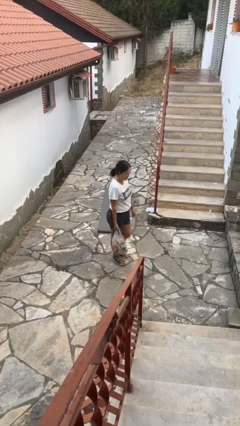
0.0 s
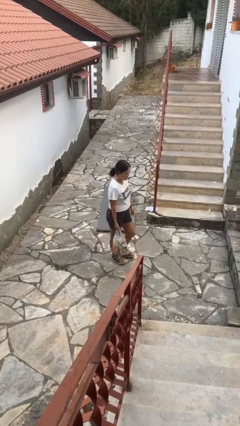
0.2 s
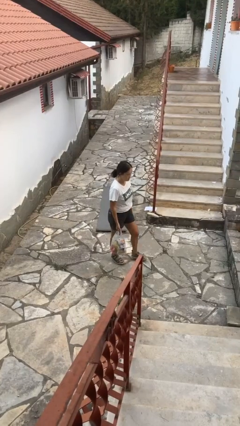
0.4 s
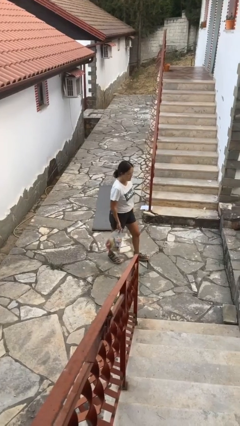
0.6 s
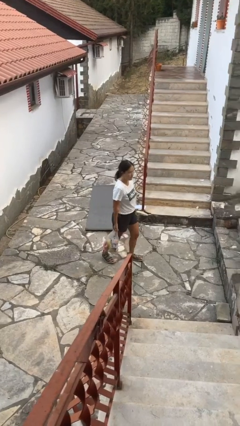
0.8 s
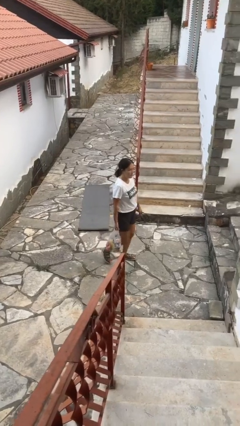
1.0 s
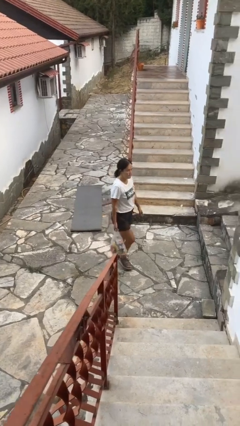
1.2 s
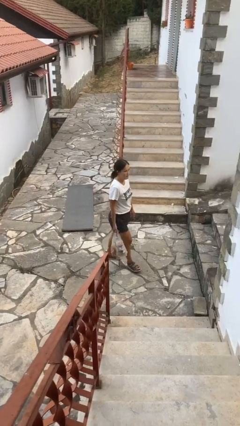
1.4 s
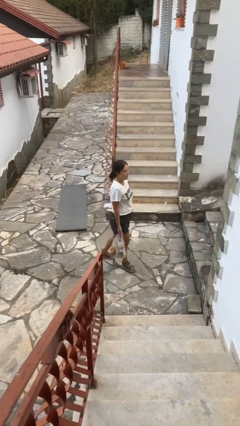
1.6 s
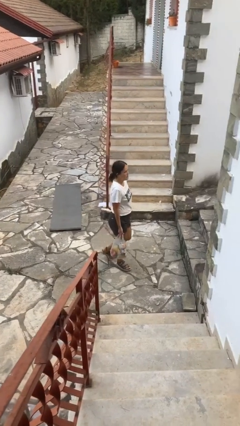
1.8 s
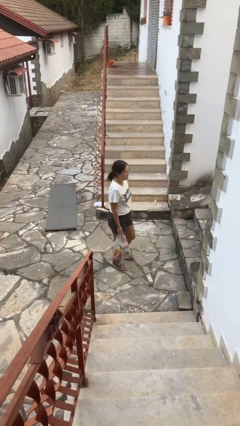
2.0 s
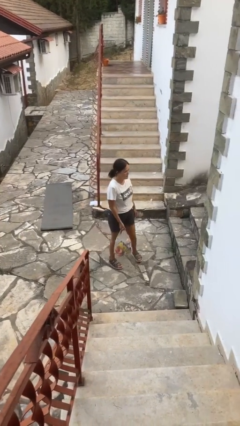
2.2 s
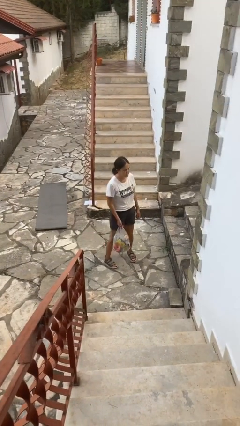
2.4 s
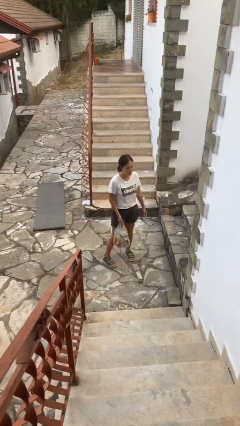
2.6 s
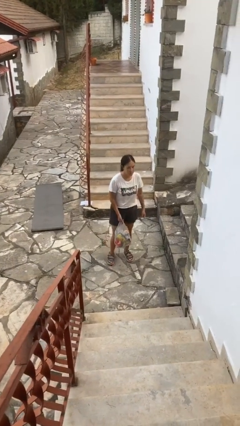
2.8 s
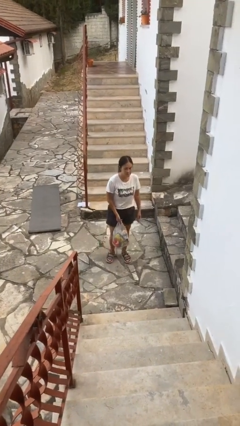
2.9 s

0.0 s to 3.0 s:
person carries groceries

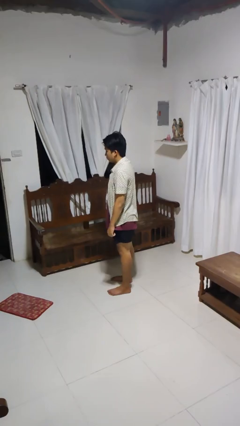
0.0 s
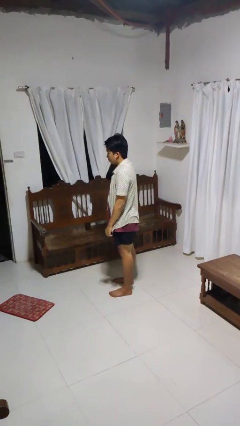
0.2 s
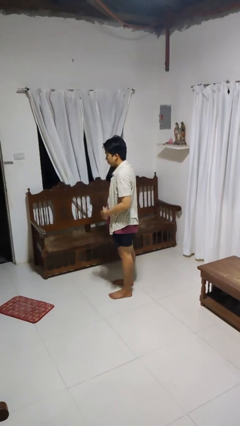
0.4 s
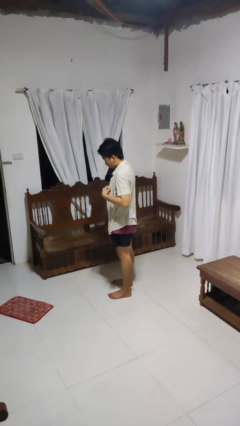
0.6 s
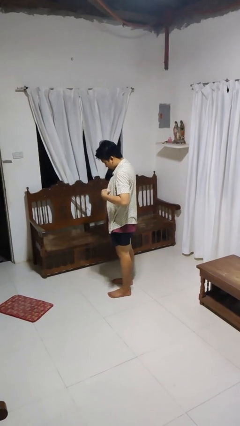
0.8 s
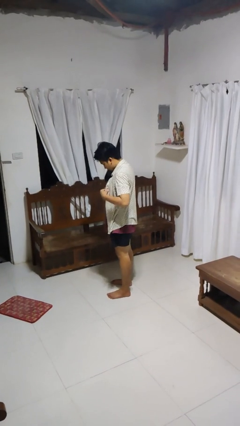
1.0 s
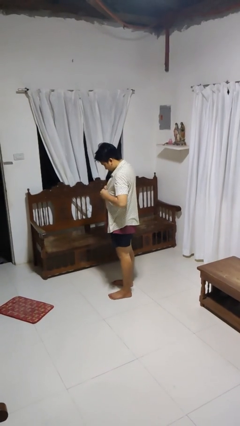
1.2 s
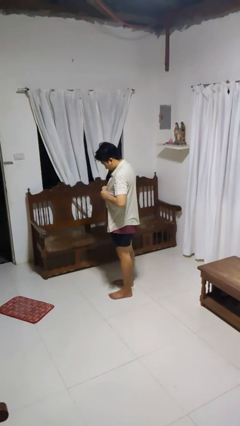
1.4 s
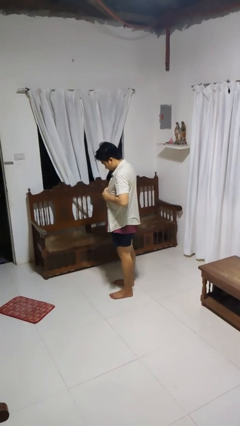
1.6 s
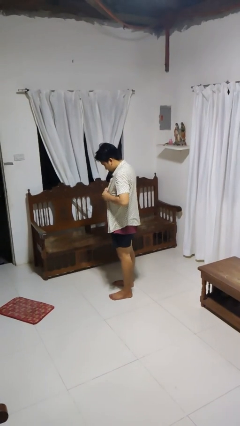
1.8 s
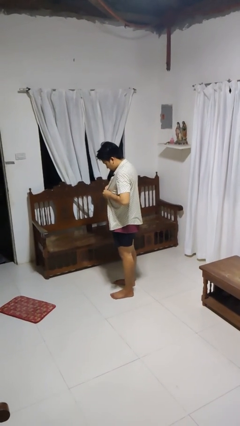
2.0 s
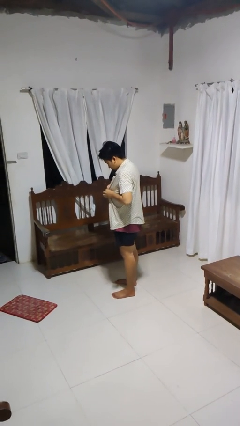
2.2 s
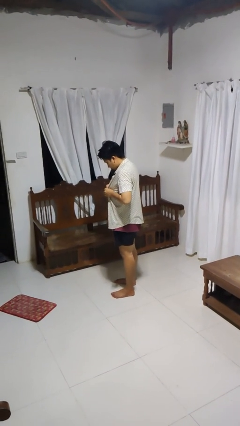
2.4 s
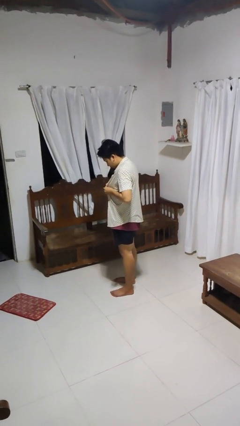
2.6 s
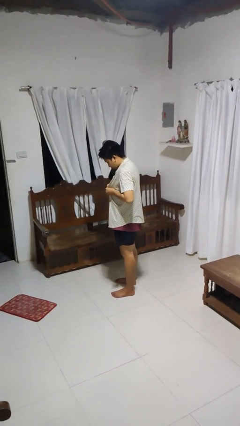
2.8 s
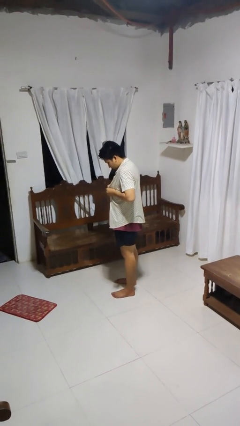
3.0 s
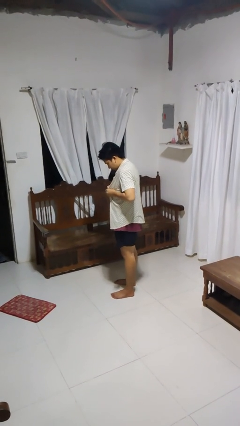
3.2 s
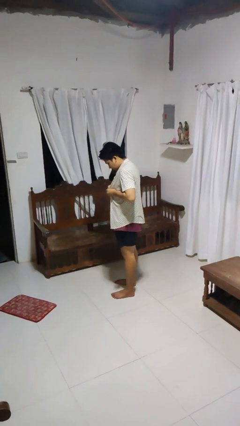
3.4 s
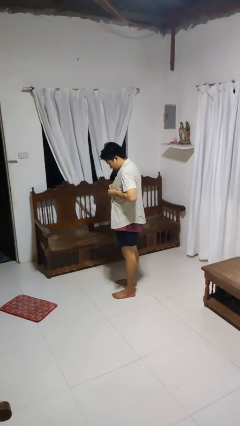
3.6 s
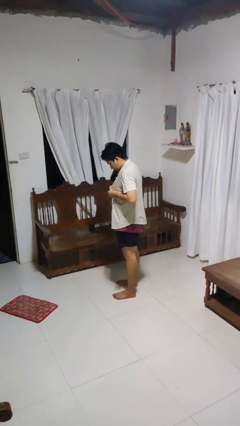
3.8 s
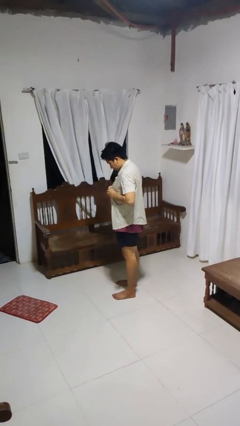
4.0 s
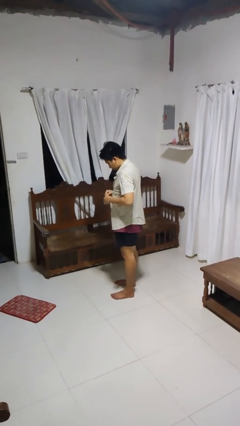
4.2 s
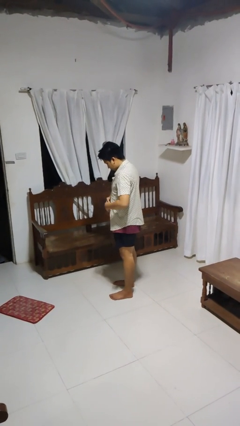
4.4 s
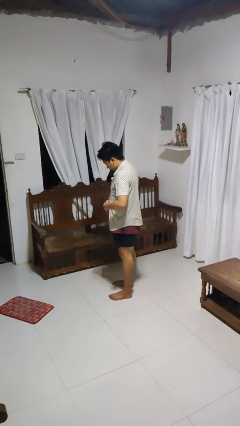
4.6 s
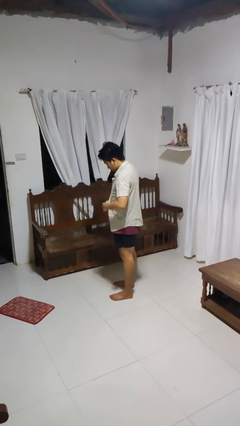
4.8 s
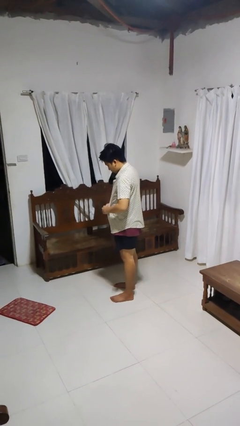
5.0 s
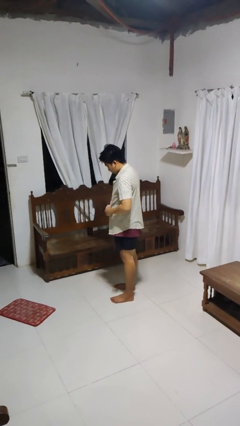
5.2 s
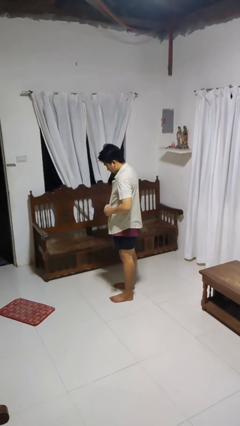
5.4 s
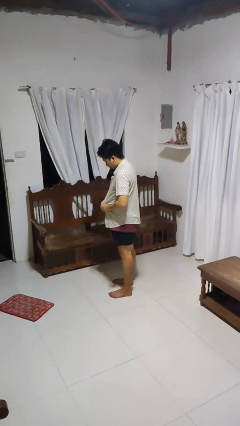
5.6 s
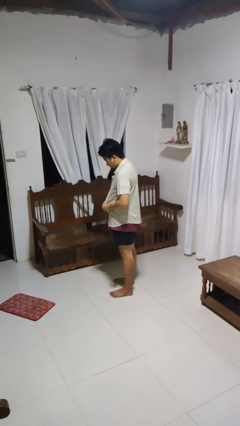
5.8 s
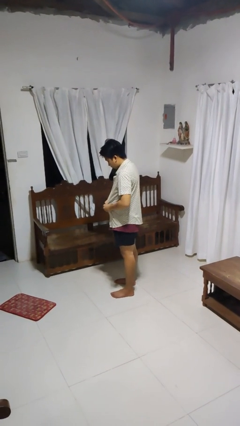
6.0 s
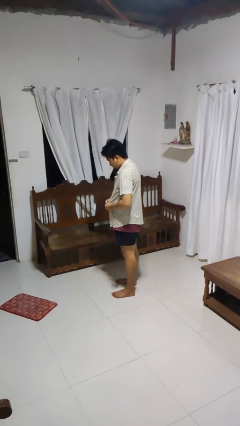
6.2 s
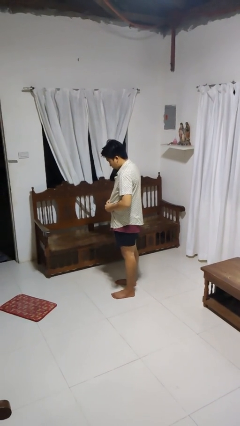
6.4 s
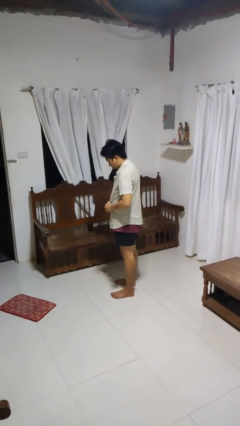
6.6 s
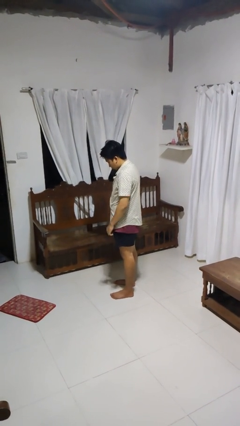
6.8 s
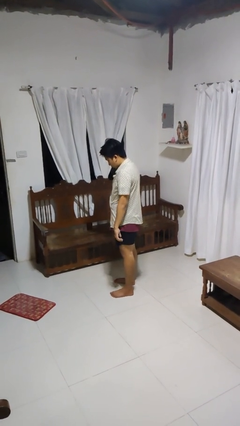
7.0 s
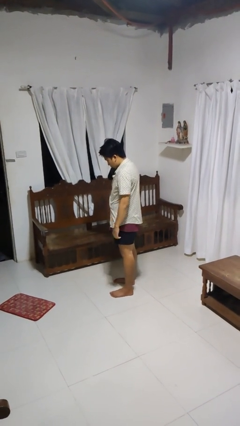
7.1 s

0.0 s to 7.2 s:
person buttons shirt

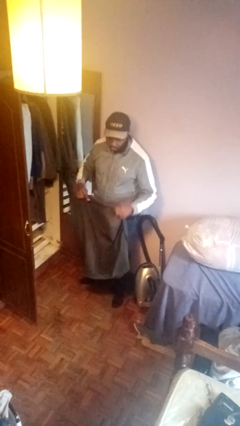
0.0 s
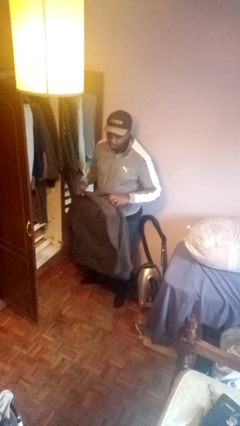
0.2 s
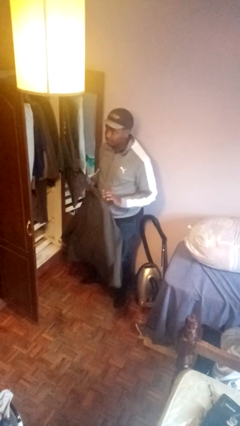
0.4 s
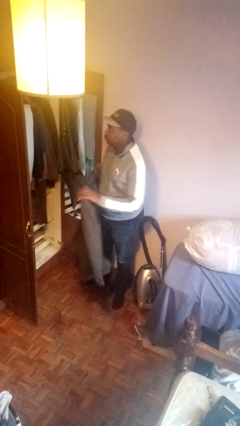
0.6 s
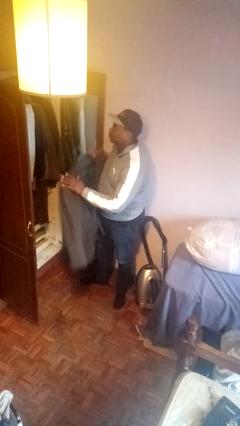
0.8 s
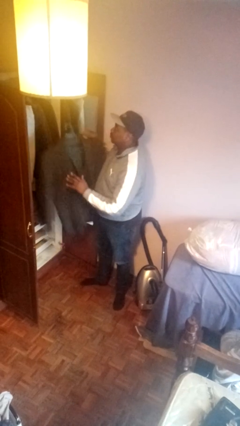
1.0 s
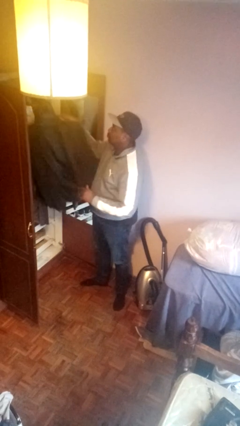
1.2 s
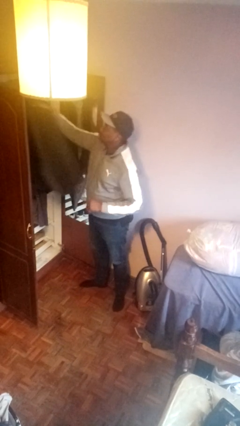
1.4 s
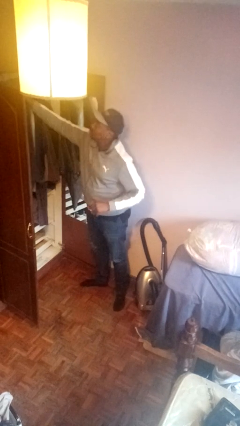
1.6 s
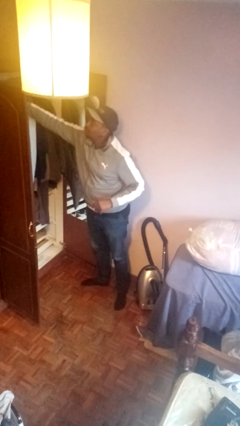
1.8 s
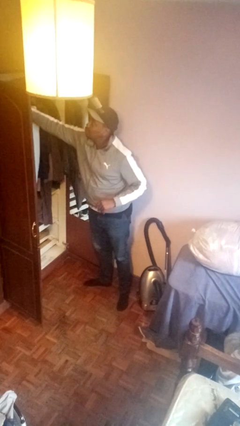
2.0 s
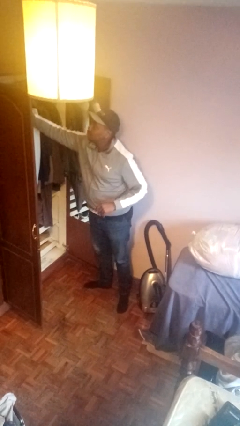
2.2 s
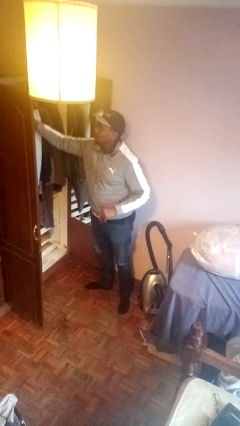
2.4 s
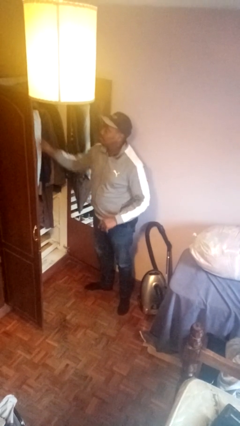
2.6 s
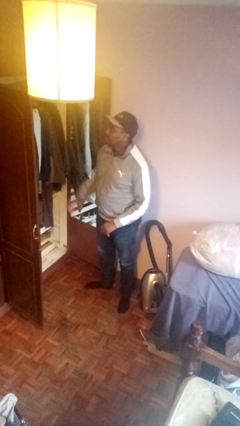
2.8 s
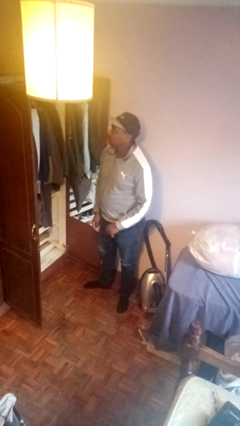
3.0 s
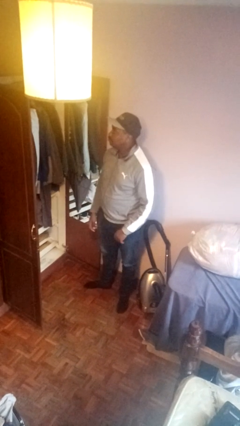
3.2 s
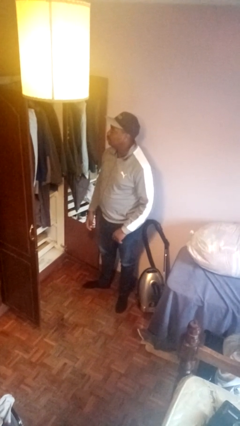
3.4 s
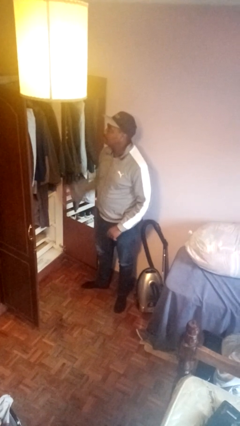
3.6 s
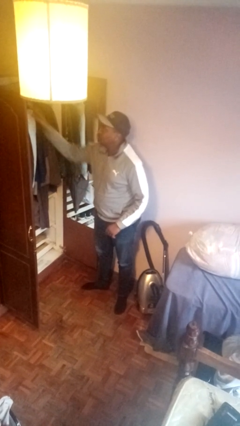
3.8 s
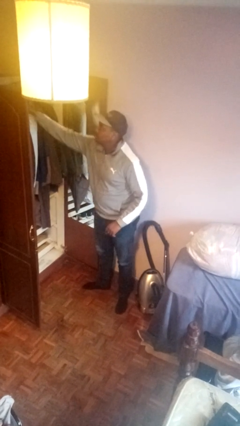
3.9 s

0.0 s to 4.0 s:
person puts clothes into closet

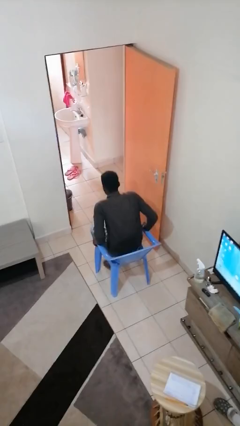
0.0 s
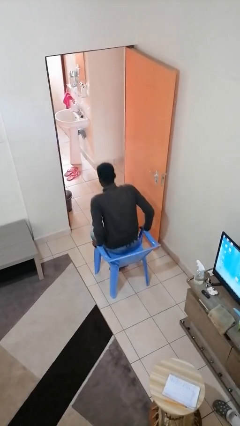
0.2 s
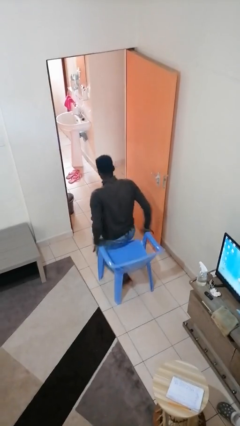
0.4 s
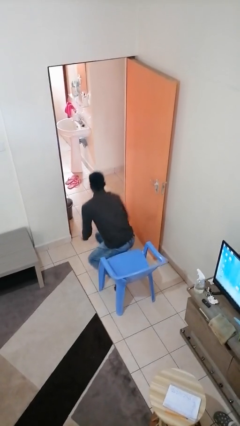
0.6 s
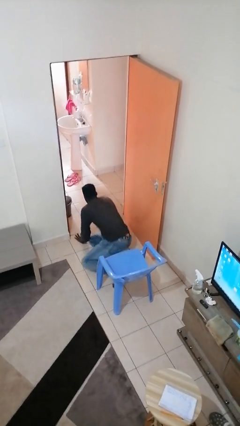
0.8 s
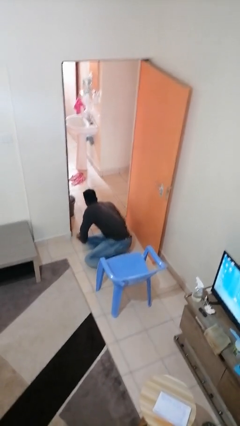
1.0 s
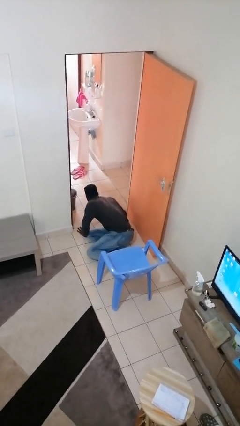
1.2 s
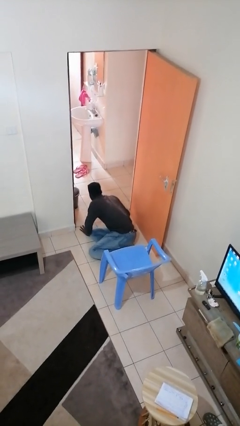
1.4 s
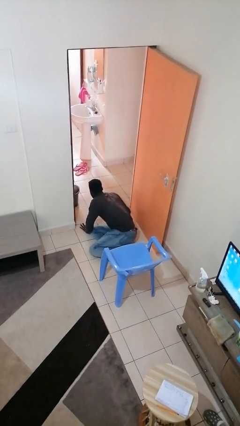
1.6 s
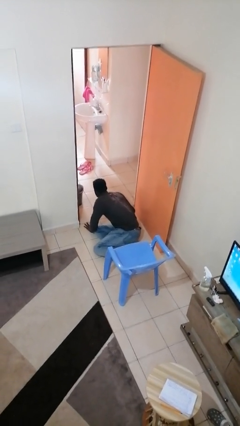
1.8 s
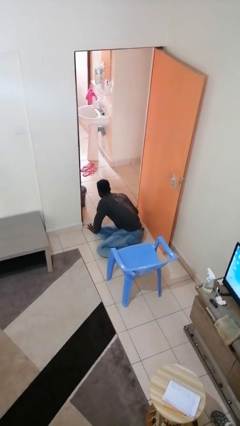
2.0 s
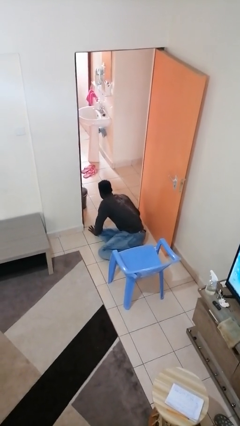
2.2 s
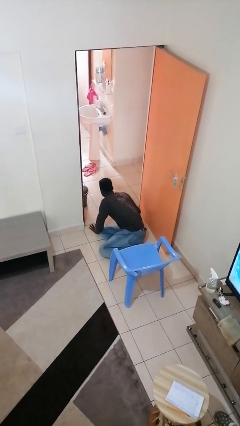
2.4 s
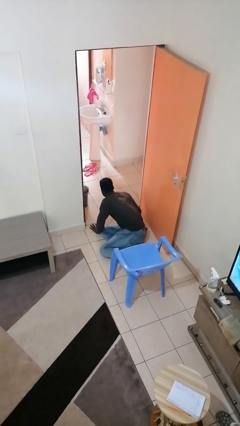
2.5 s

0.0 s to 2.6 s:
person falls from chair

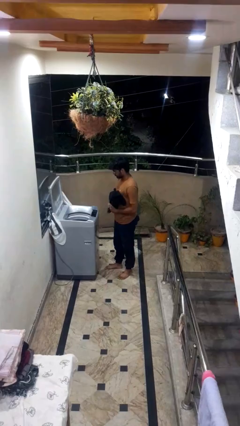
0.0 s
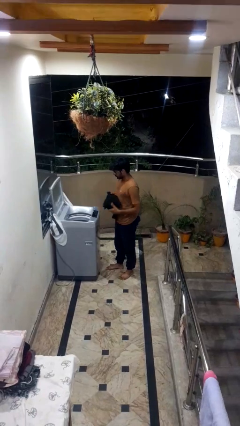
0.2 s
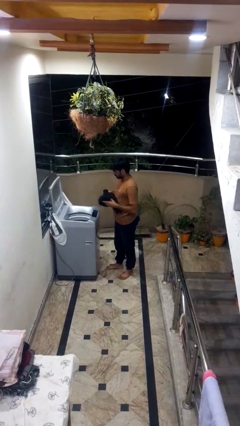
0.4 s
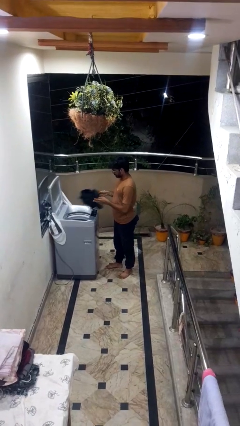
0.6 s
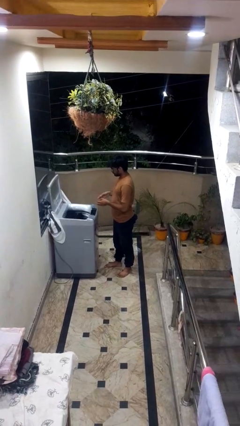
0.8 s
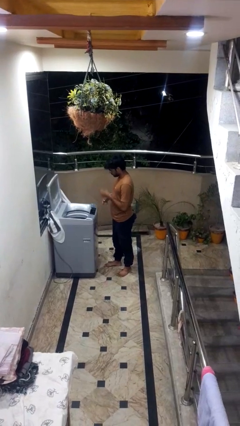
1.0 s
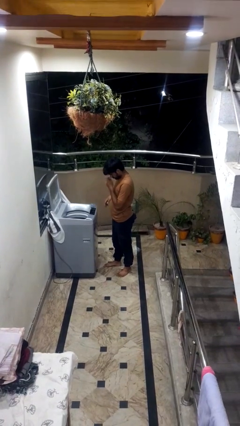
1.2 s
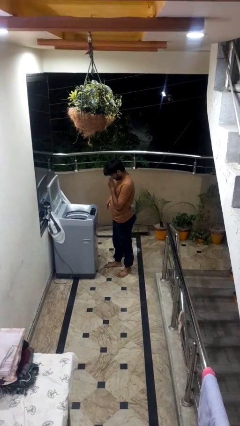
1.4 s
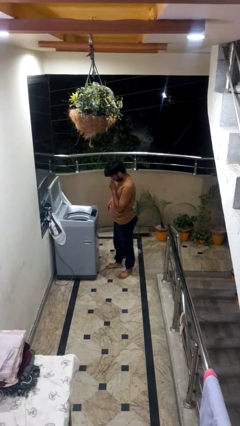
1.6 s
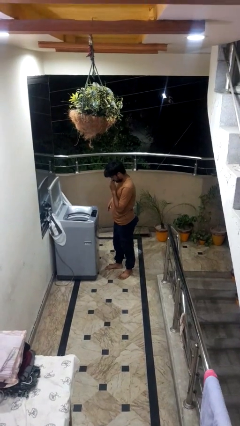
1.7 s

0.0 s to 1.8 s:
person loads clotheswasher
